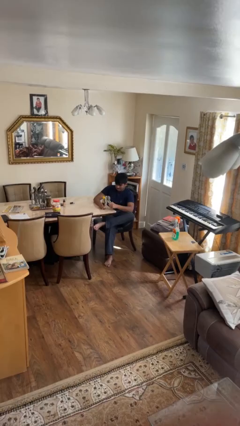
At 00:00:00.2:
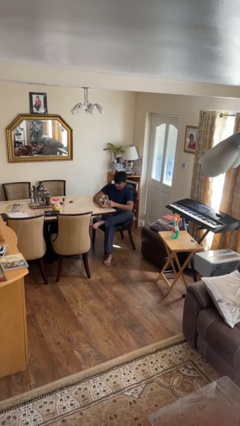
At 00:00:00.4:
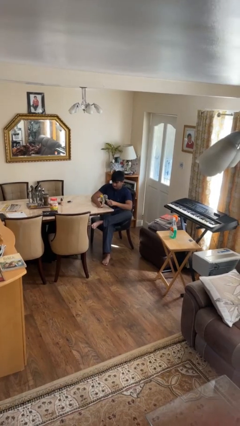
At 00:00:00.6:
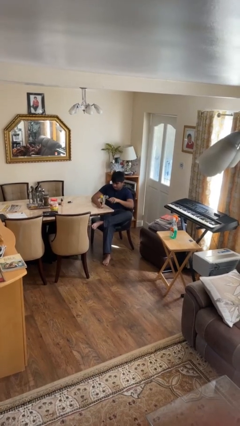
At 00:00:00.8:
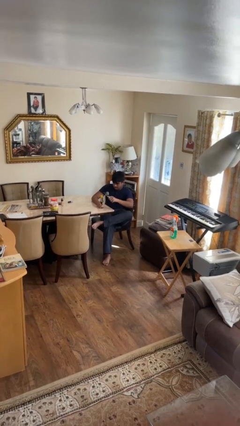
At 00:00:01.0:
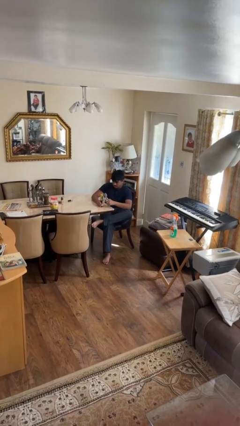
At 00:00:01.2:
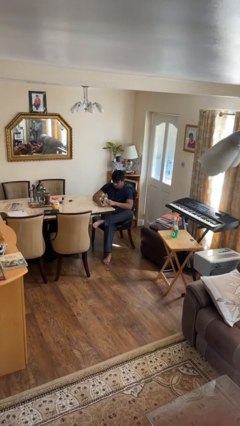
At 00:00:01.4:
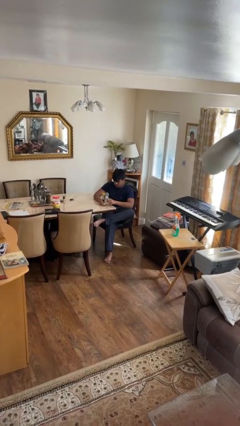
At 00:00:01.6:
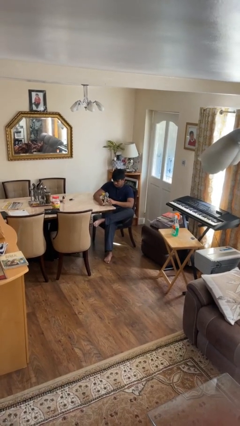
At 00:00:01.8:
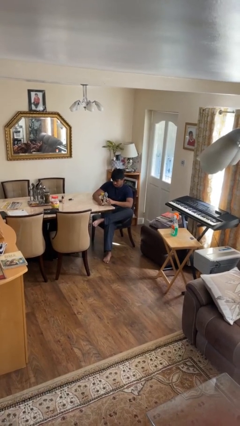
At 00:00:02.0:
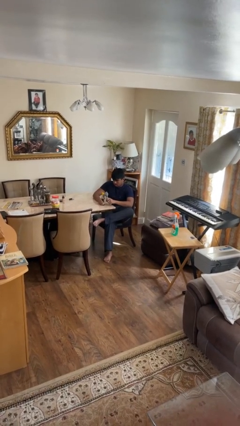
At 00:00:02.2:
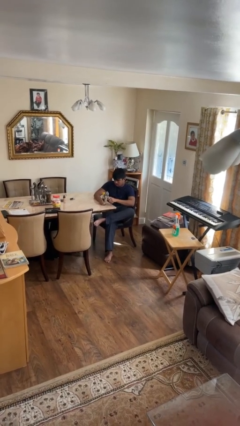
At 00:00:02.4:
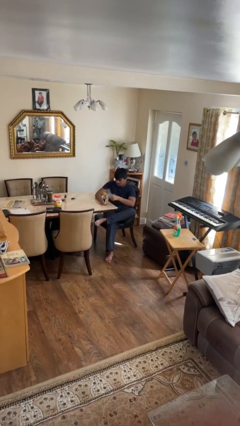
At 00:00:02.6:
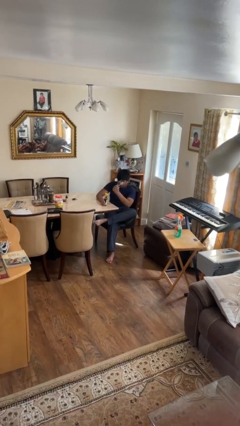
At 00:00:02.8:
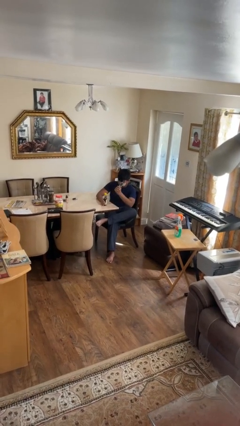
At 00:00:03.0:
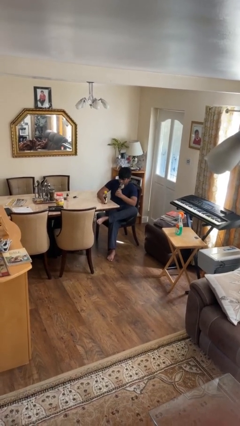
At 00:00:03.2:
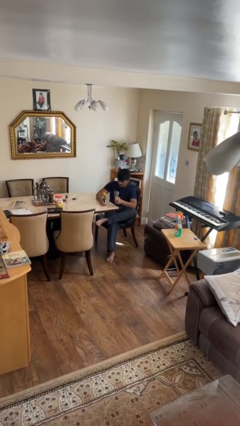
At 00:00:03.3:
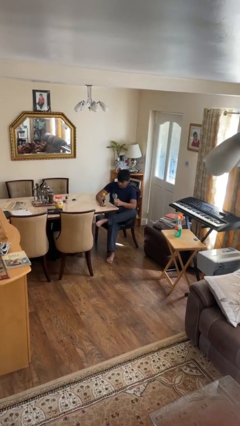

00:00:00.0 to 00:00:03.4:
person opens can with can opener

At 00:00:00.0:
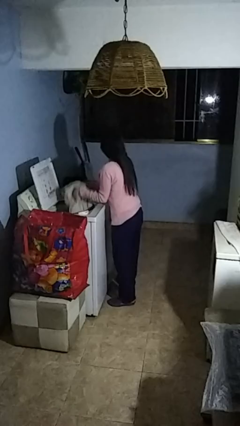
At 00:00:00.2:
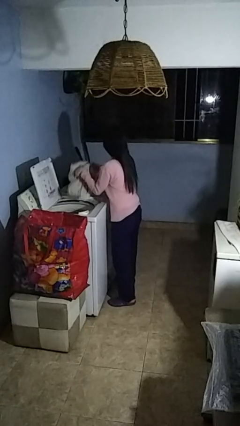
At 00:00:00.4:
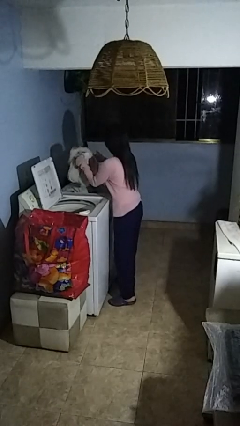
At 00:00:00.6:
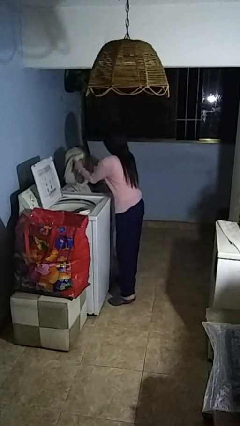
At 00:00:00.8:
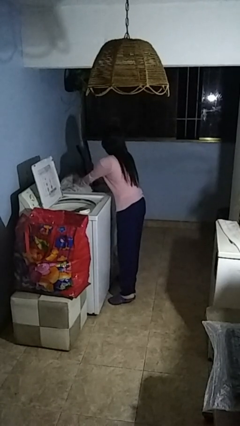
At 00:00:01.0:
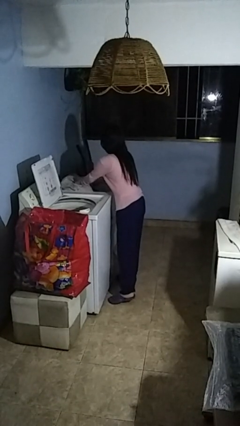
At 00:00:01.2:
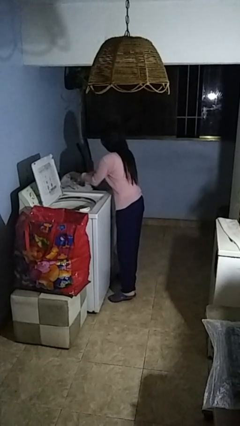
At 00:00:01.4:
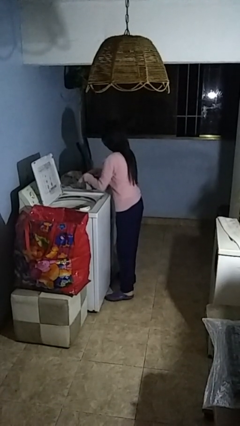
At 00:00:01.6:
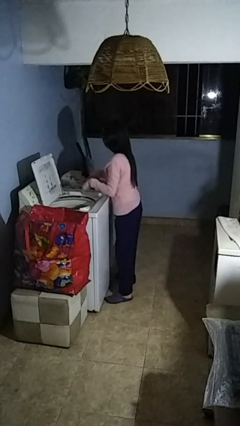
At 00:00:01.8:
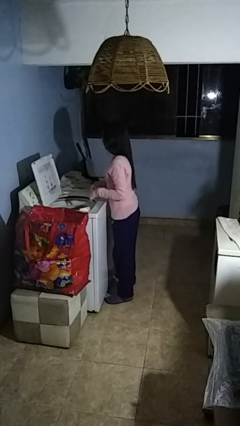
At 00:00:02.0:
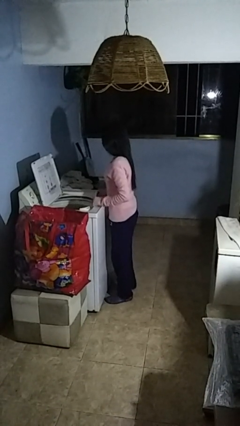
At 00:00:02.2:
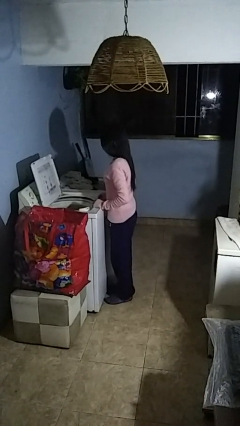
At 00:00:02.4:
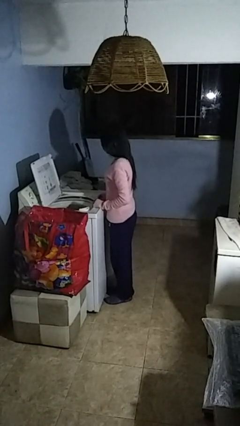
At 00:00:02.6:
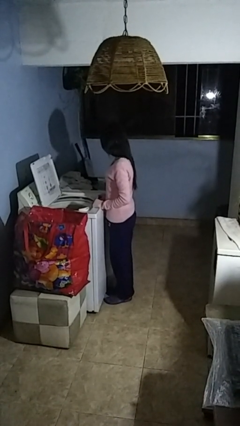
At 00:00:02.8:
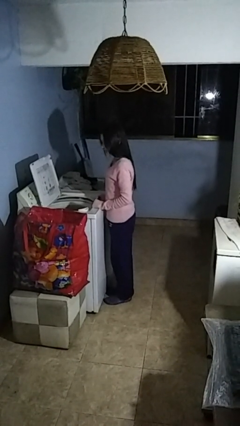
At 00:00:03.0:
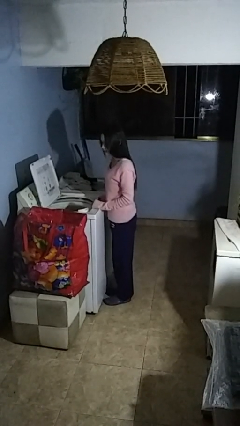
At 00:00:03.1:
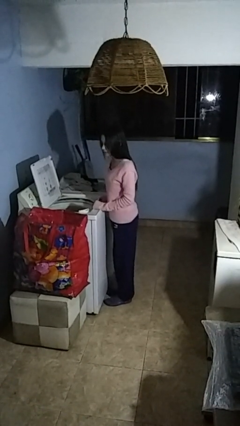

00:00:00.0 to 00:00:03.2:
person loads clotheswasher

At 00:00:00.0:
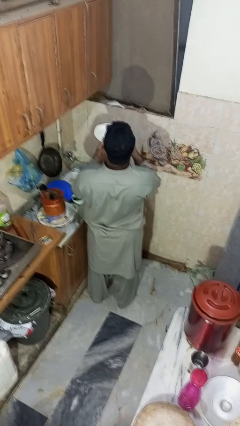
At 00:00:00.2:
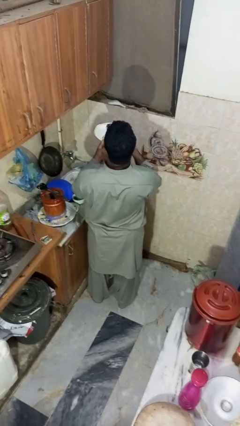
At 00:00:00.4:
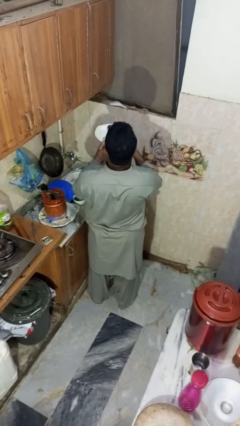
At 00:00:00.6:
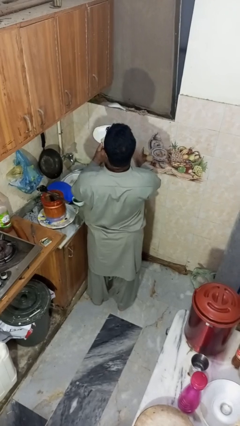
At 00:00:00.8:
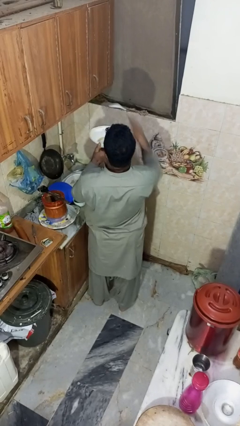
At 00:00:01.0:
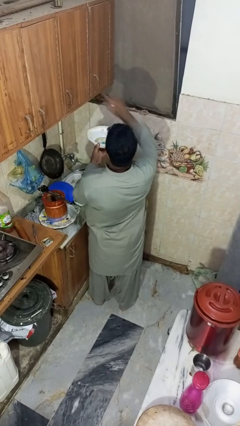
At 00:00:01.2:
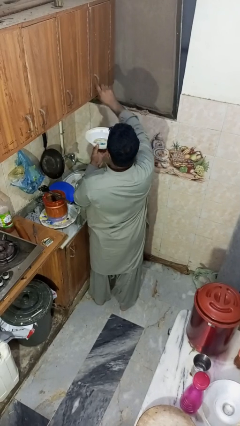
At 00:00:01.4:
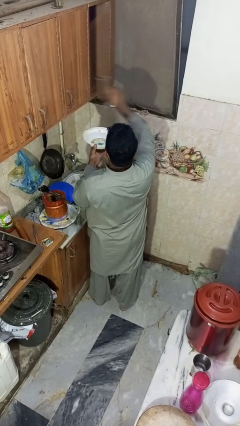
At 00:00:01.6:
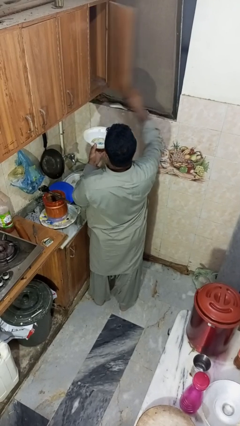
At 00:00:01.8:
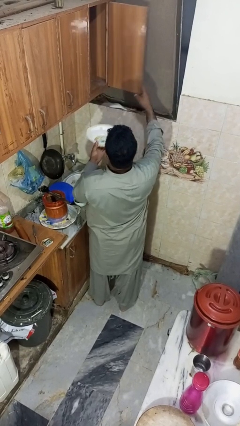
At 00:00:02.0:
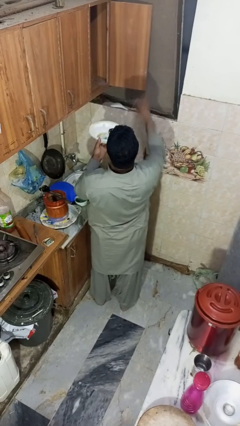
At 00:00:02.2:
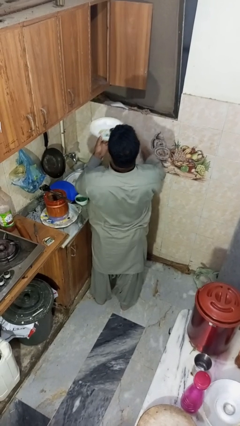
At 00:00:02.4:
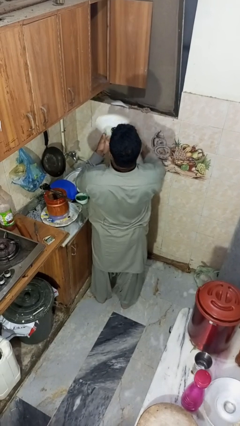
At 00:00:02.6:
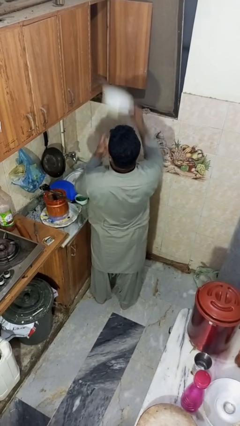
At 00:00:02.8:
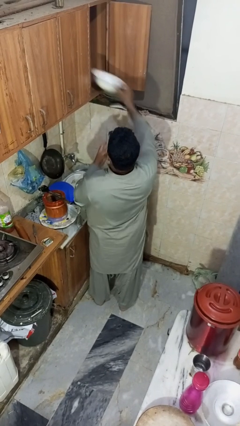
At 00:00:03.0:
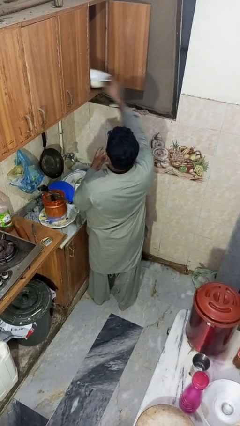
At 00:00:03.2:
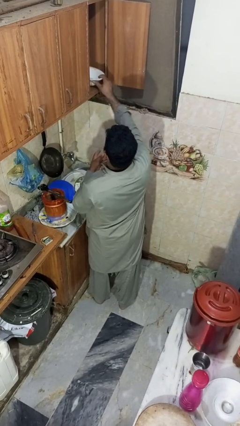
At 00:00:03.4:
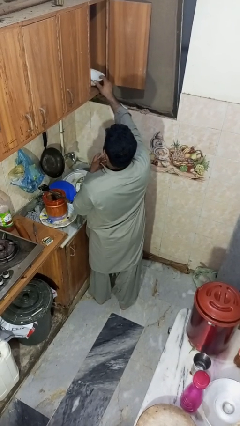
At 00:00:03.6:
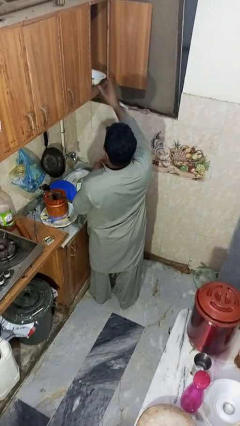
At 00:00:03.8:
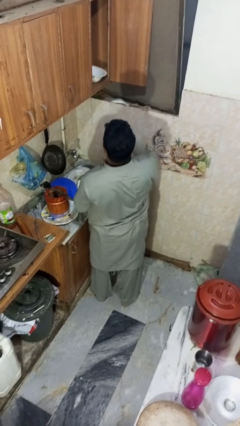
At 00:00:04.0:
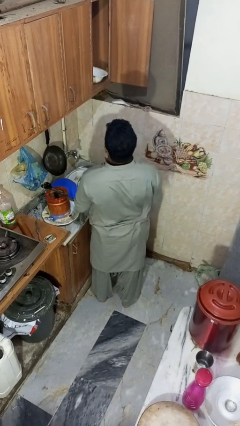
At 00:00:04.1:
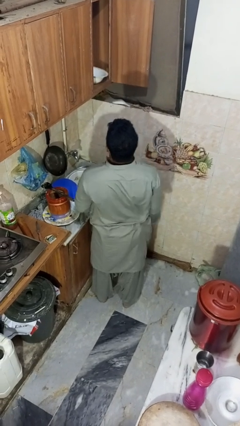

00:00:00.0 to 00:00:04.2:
person puts object in cabinet

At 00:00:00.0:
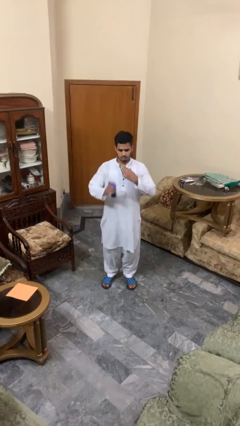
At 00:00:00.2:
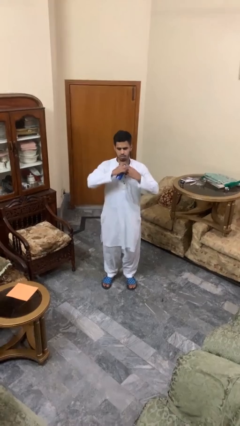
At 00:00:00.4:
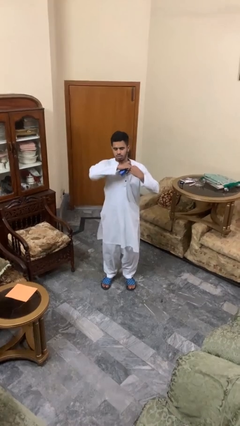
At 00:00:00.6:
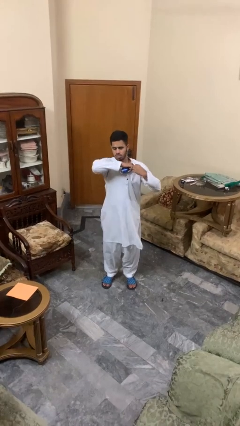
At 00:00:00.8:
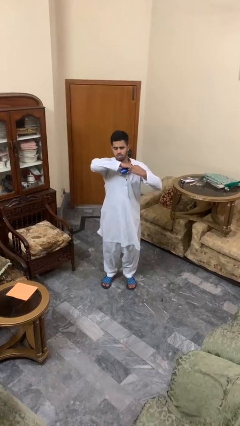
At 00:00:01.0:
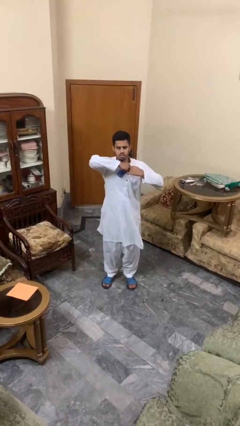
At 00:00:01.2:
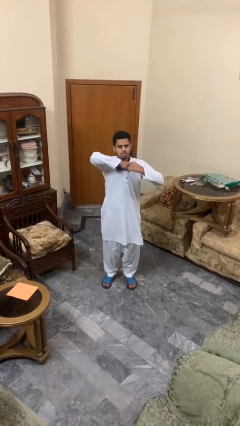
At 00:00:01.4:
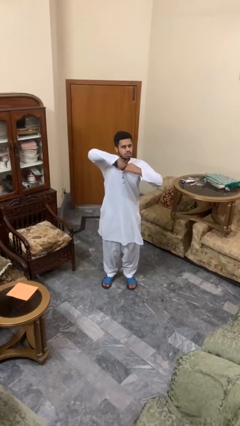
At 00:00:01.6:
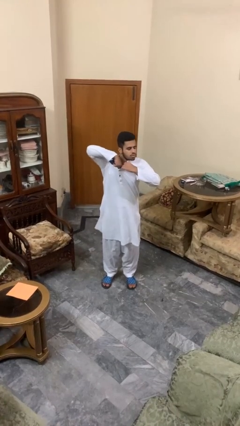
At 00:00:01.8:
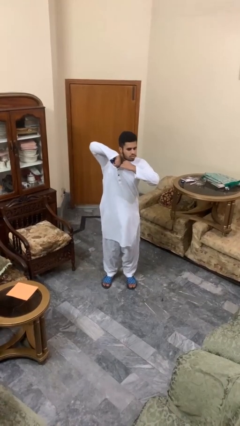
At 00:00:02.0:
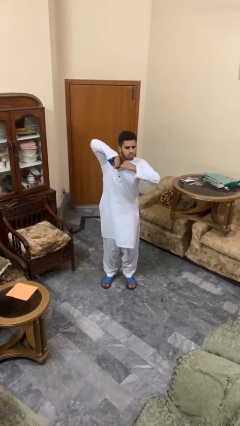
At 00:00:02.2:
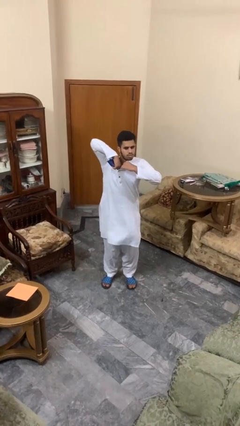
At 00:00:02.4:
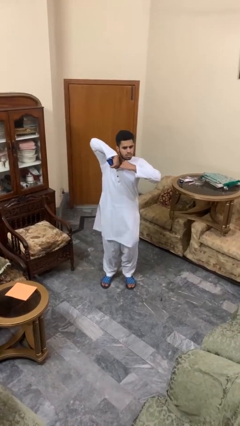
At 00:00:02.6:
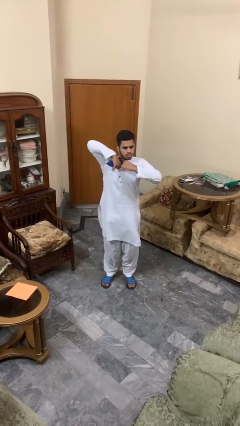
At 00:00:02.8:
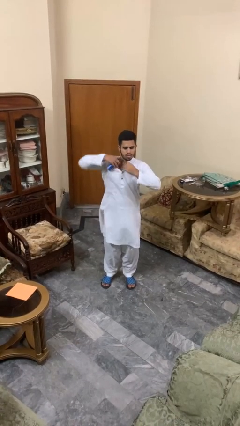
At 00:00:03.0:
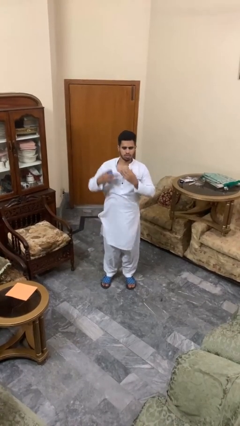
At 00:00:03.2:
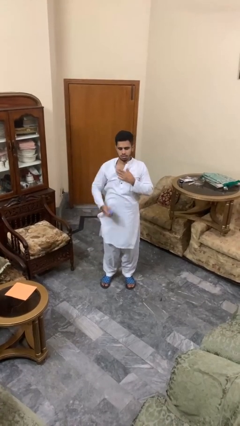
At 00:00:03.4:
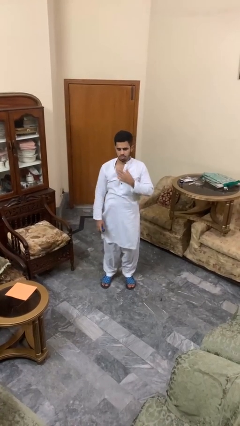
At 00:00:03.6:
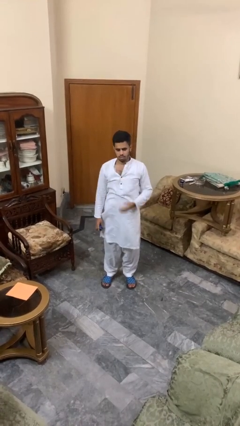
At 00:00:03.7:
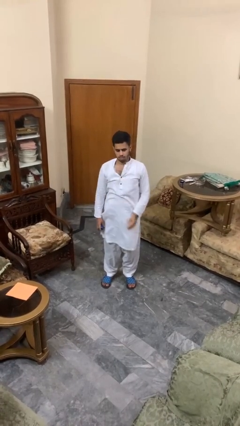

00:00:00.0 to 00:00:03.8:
person applies deodorant

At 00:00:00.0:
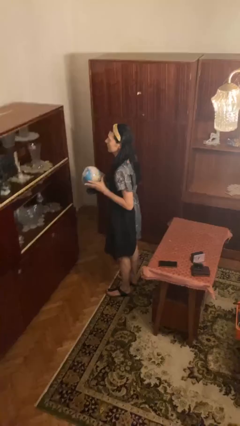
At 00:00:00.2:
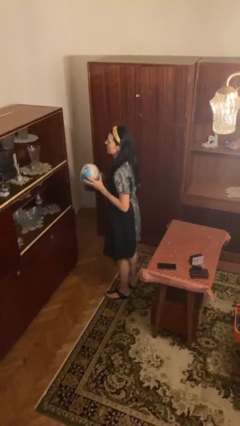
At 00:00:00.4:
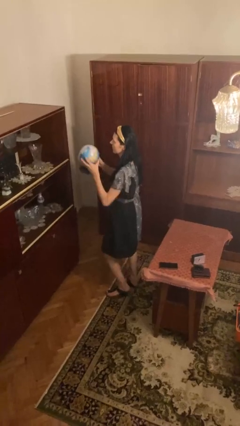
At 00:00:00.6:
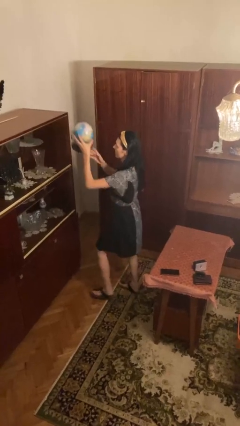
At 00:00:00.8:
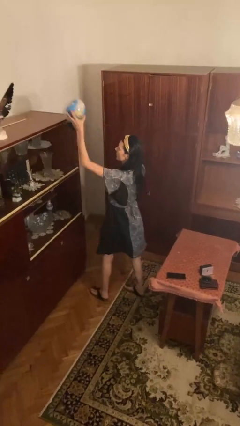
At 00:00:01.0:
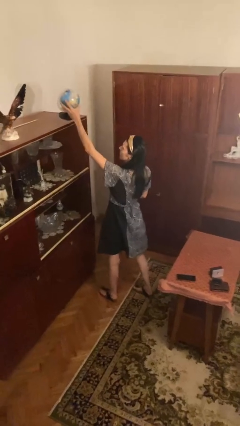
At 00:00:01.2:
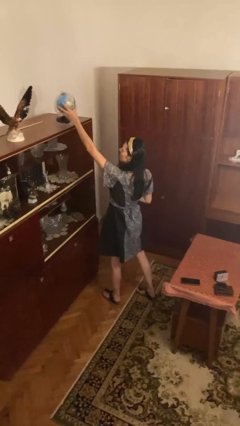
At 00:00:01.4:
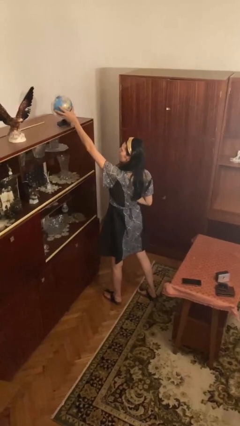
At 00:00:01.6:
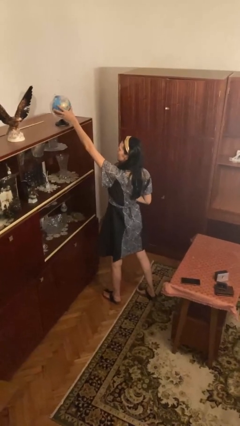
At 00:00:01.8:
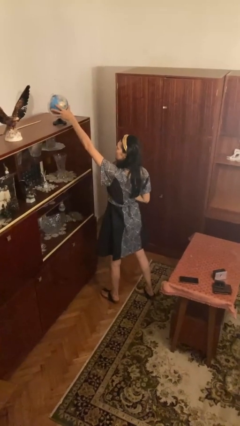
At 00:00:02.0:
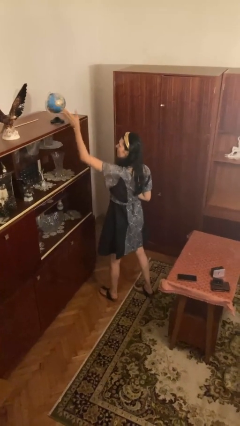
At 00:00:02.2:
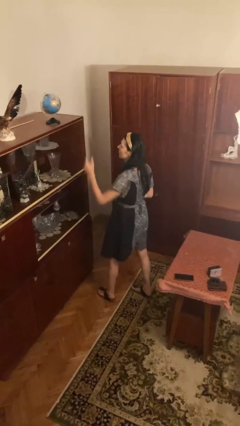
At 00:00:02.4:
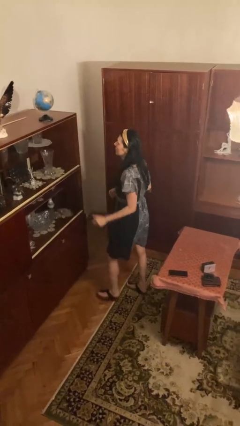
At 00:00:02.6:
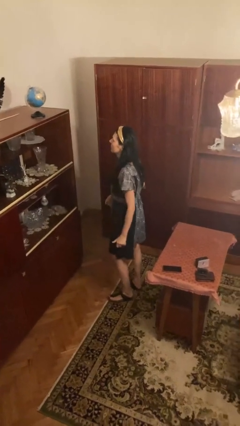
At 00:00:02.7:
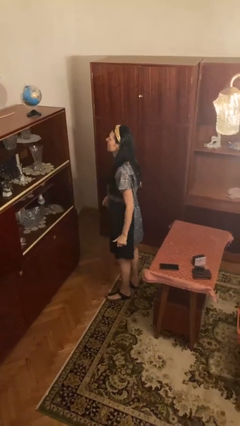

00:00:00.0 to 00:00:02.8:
person puts down object on countertop
